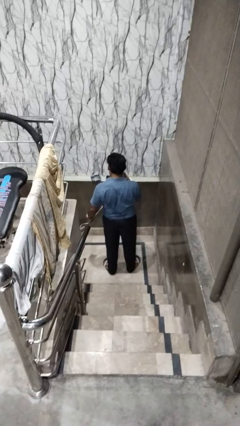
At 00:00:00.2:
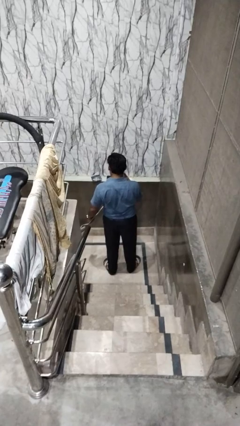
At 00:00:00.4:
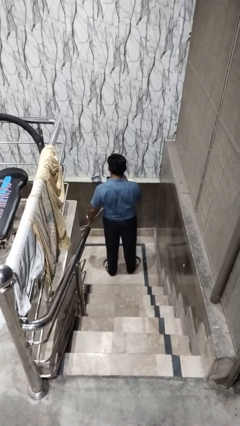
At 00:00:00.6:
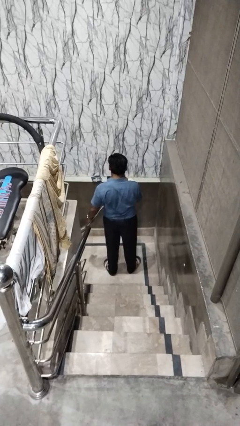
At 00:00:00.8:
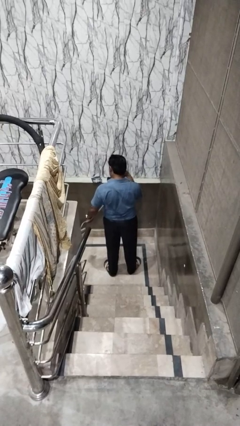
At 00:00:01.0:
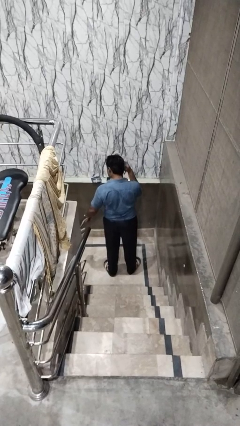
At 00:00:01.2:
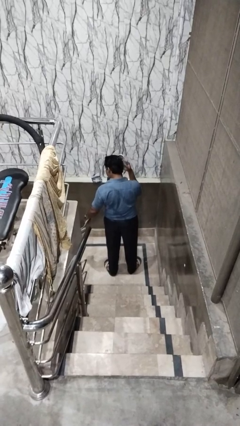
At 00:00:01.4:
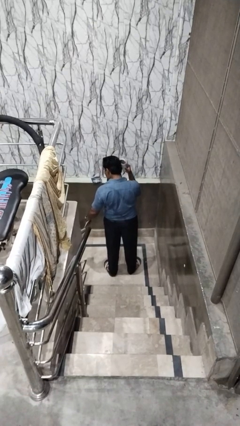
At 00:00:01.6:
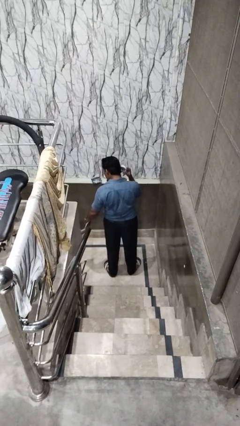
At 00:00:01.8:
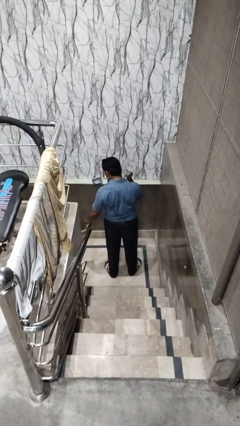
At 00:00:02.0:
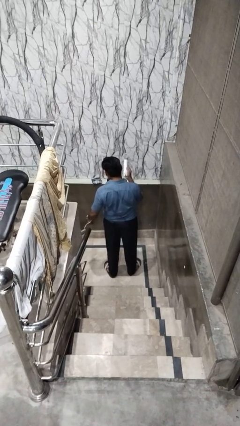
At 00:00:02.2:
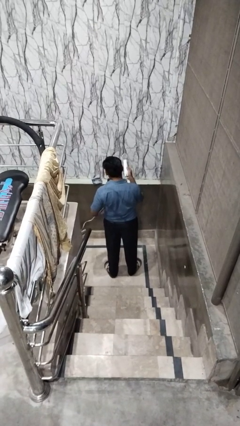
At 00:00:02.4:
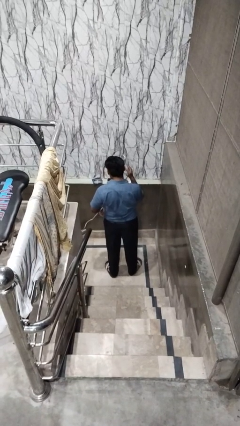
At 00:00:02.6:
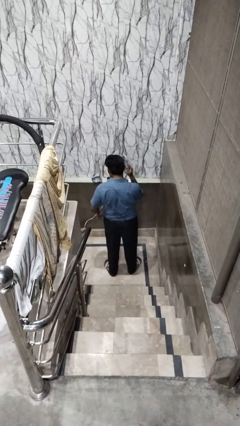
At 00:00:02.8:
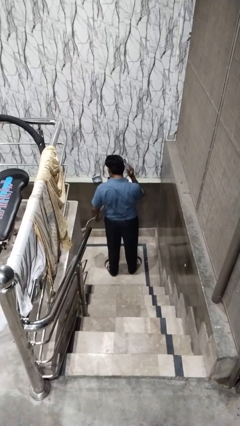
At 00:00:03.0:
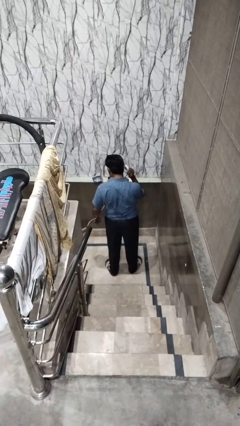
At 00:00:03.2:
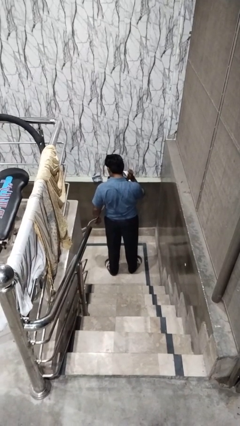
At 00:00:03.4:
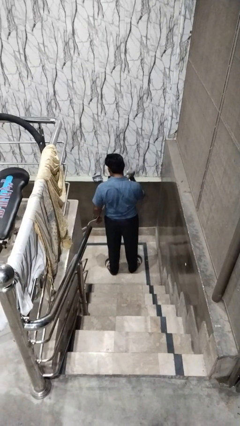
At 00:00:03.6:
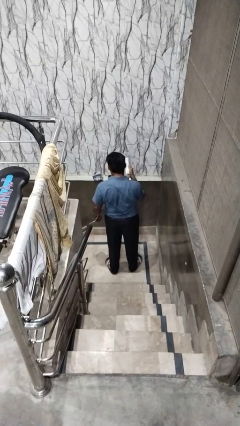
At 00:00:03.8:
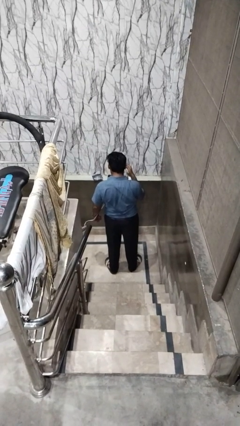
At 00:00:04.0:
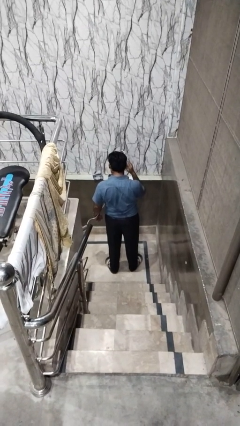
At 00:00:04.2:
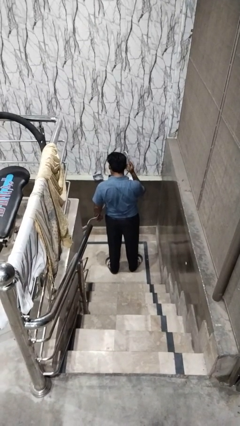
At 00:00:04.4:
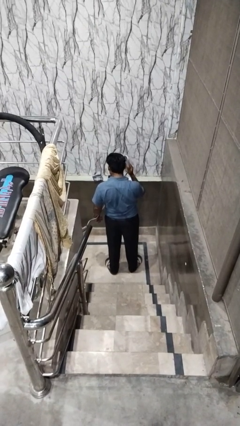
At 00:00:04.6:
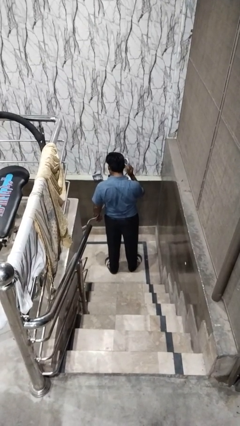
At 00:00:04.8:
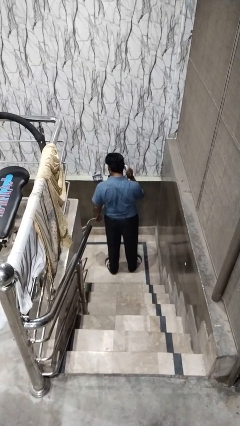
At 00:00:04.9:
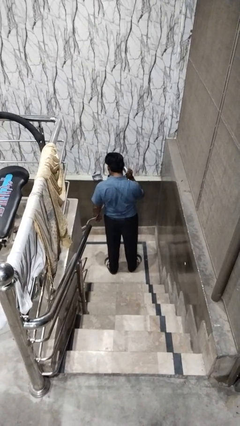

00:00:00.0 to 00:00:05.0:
person dries hair with hairdryer

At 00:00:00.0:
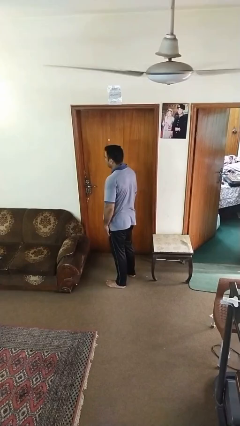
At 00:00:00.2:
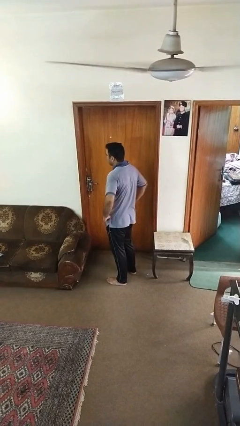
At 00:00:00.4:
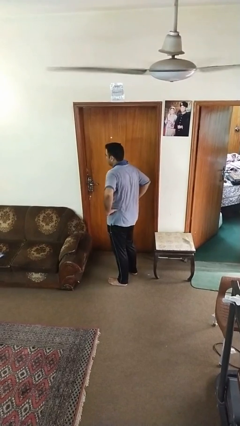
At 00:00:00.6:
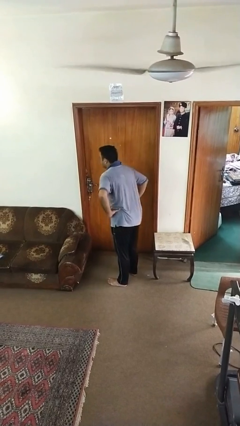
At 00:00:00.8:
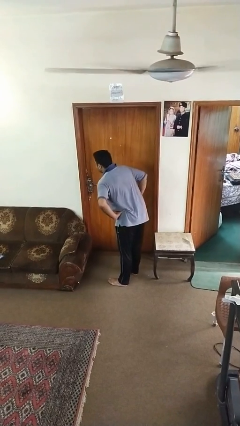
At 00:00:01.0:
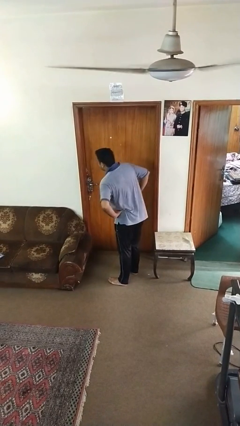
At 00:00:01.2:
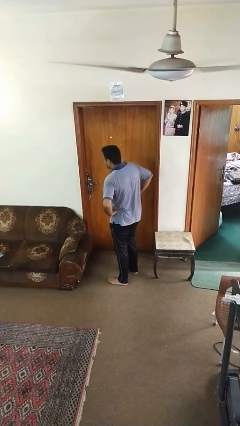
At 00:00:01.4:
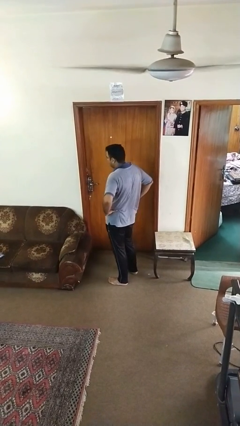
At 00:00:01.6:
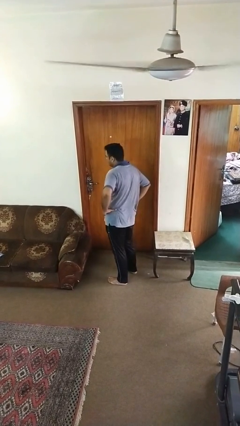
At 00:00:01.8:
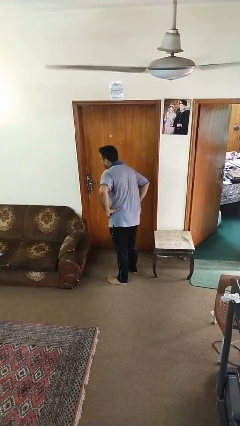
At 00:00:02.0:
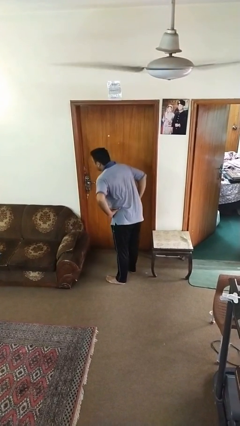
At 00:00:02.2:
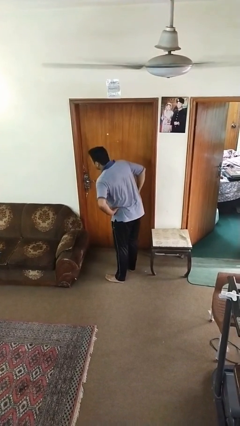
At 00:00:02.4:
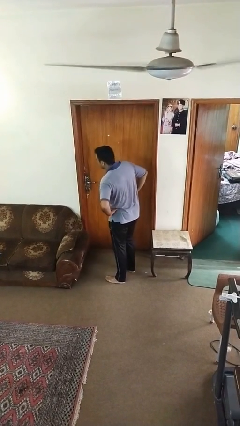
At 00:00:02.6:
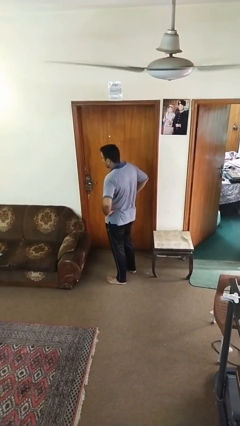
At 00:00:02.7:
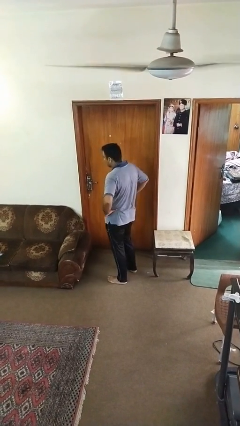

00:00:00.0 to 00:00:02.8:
person wiggles hips

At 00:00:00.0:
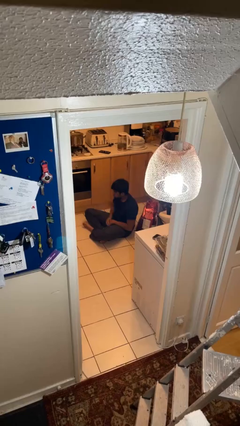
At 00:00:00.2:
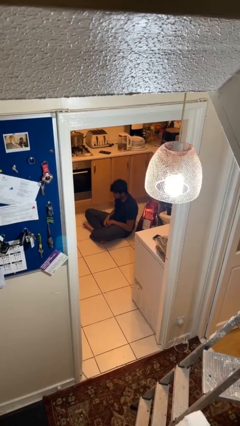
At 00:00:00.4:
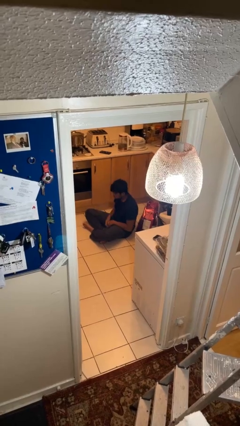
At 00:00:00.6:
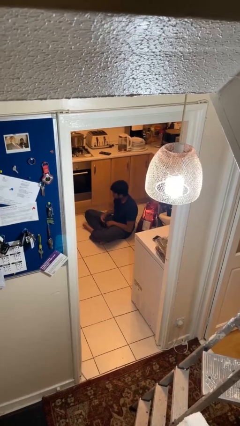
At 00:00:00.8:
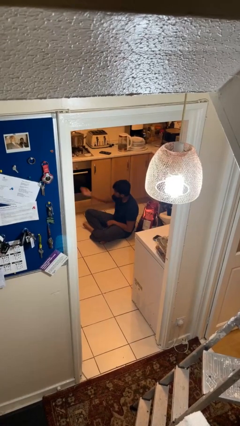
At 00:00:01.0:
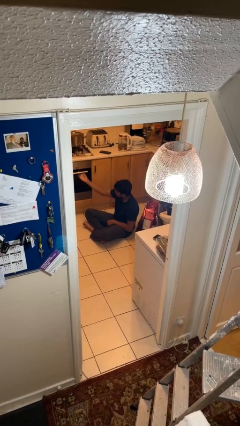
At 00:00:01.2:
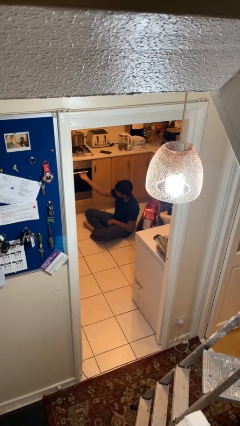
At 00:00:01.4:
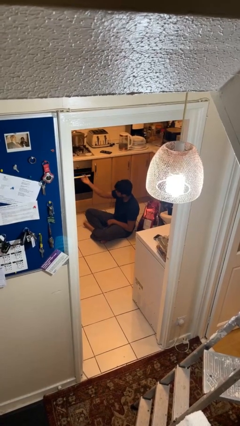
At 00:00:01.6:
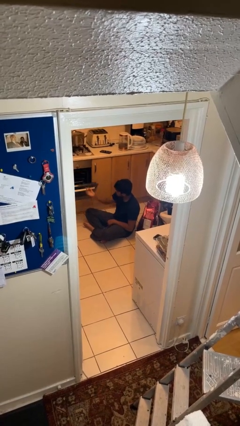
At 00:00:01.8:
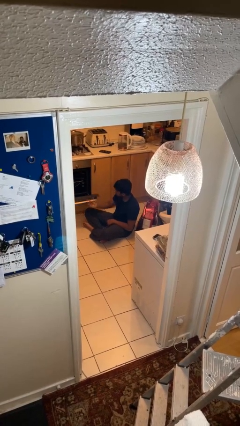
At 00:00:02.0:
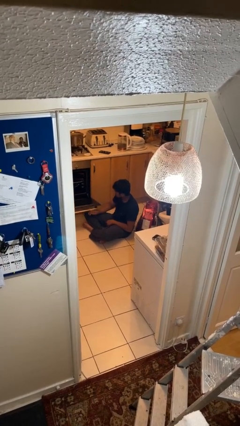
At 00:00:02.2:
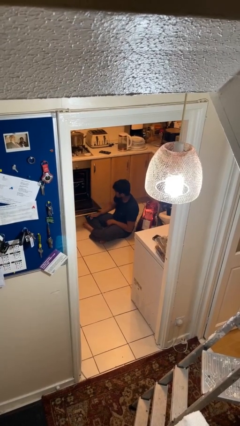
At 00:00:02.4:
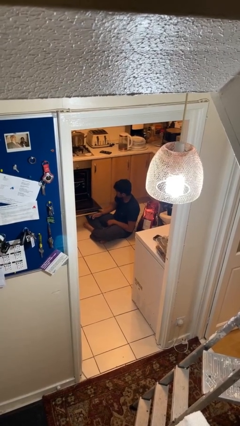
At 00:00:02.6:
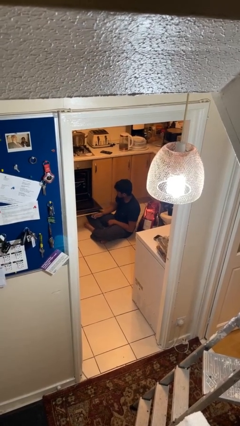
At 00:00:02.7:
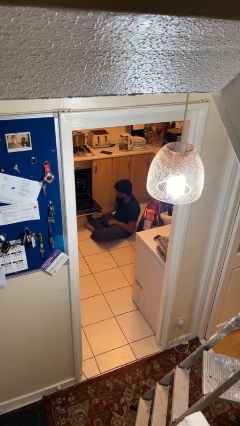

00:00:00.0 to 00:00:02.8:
person opens oven door

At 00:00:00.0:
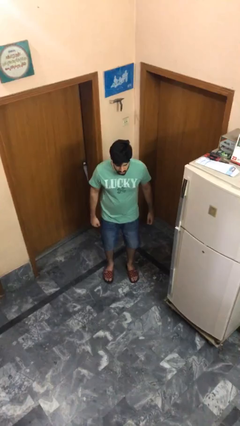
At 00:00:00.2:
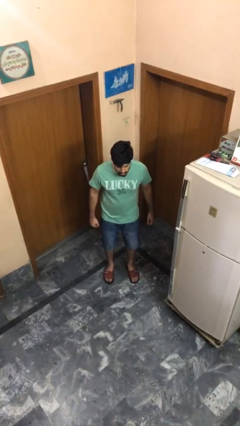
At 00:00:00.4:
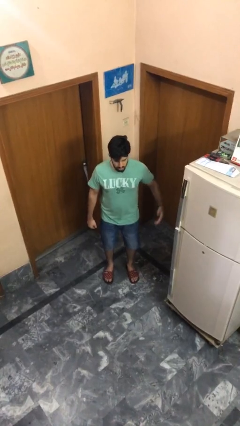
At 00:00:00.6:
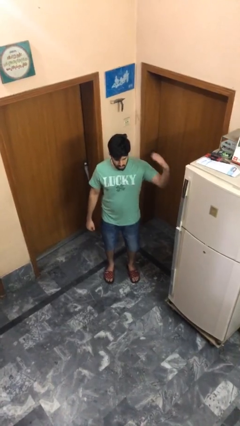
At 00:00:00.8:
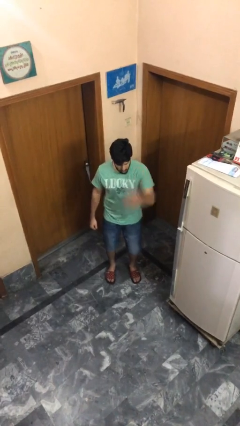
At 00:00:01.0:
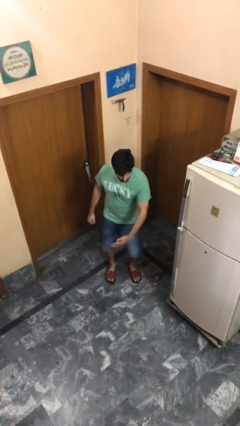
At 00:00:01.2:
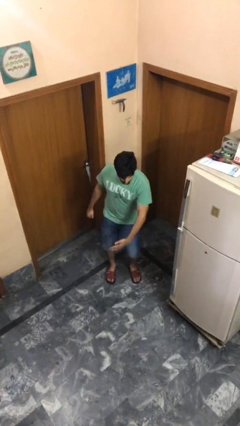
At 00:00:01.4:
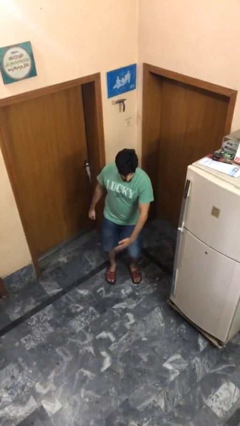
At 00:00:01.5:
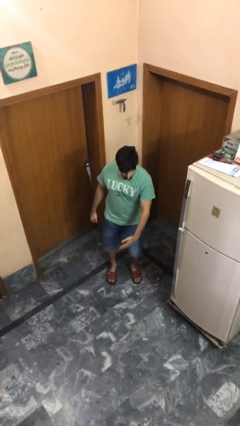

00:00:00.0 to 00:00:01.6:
person karate chop

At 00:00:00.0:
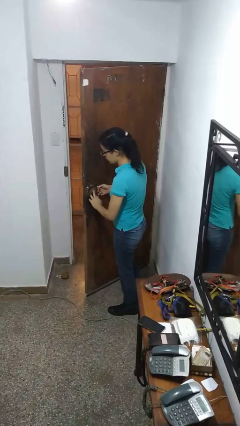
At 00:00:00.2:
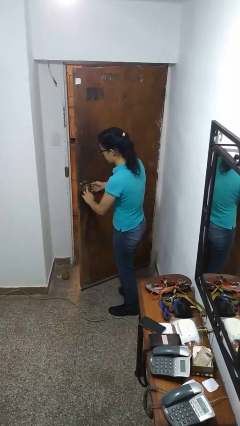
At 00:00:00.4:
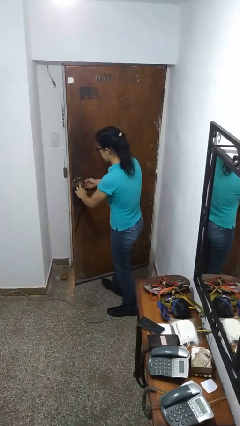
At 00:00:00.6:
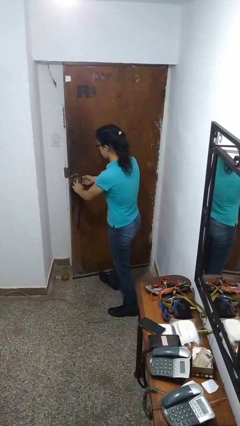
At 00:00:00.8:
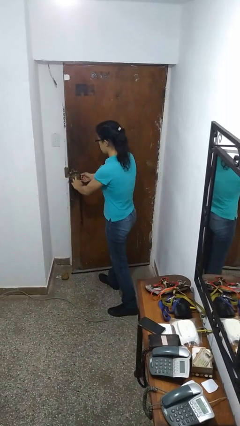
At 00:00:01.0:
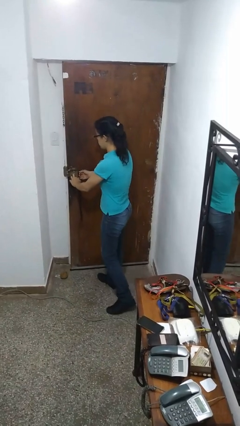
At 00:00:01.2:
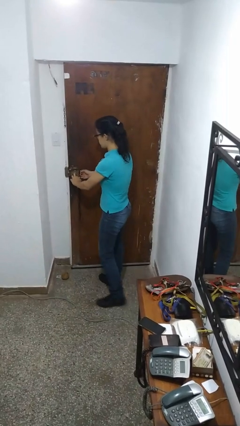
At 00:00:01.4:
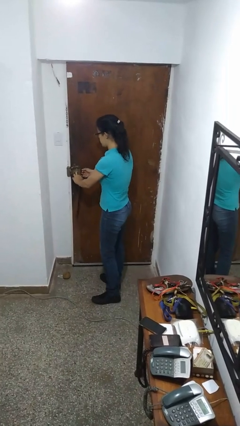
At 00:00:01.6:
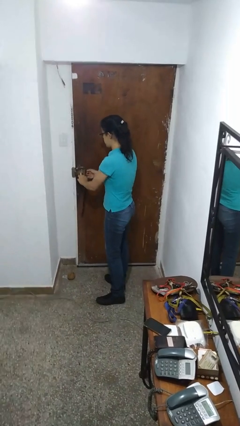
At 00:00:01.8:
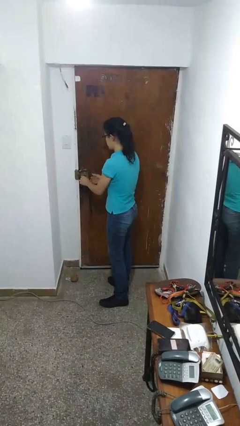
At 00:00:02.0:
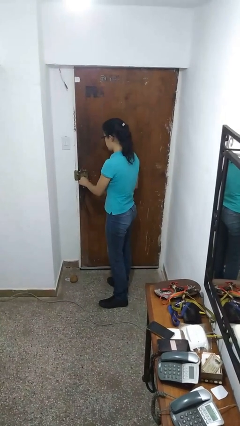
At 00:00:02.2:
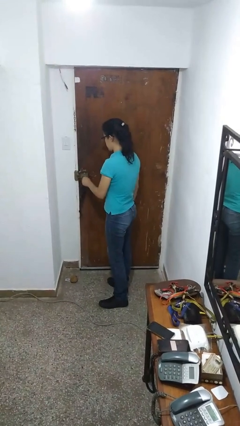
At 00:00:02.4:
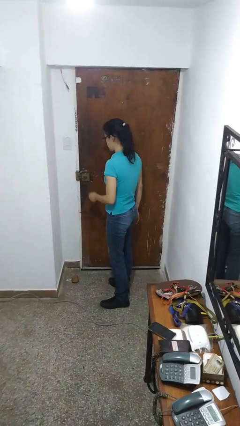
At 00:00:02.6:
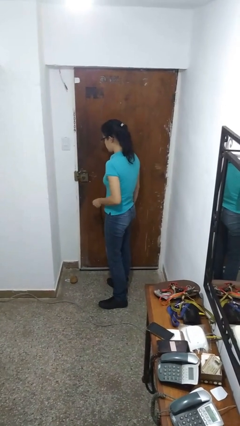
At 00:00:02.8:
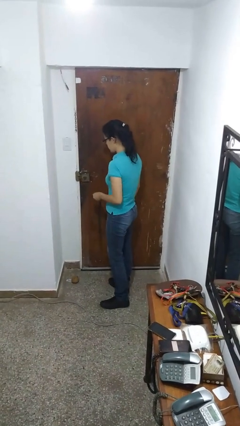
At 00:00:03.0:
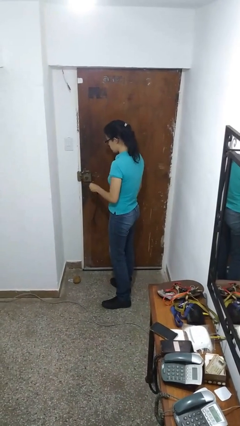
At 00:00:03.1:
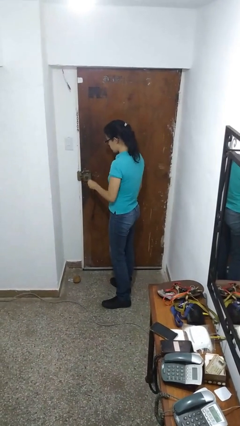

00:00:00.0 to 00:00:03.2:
person closes facility door

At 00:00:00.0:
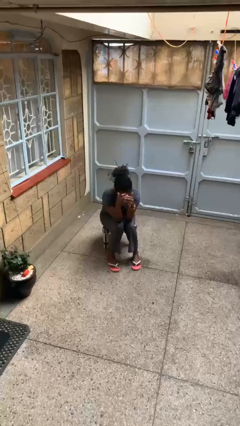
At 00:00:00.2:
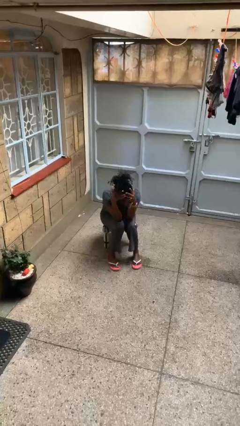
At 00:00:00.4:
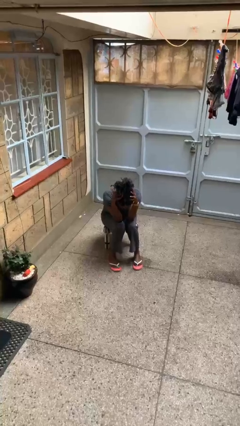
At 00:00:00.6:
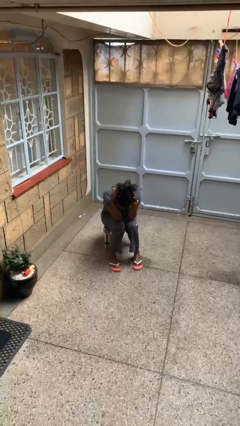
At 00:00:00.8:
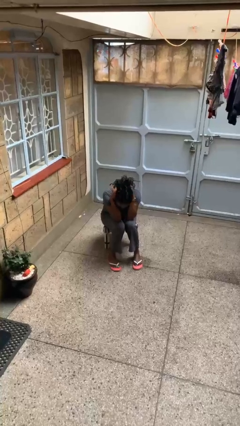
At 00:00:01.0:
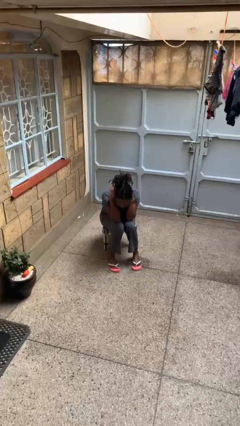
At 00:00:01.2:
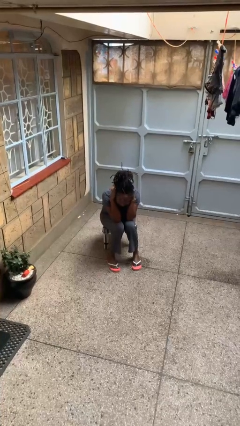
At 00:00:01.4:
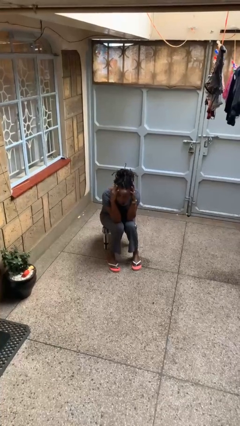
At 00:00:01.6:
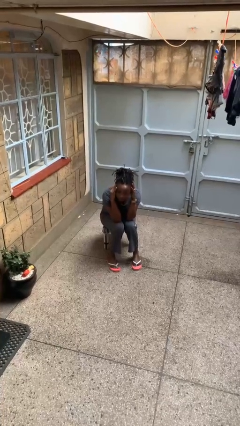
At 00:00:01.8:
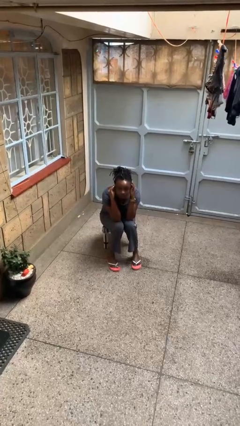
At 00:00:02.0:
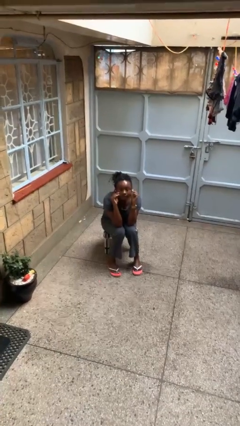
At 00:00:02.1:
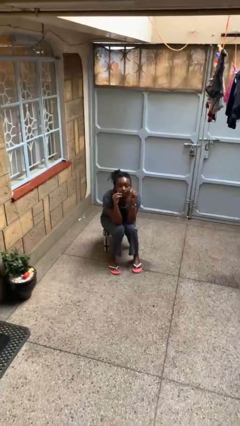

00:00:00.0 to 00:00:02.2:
person strokes hair
